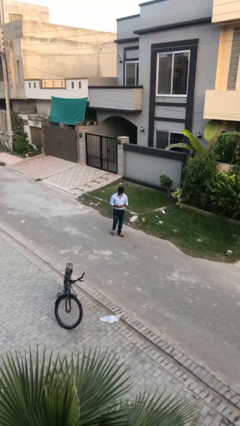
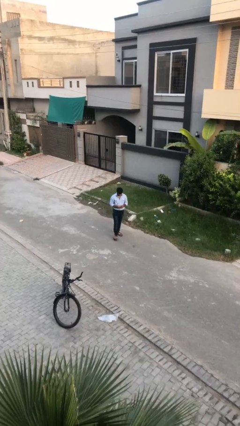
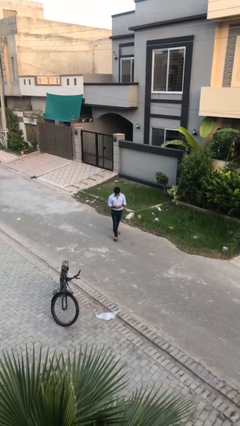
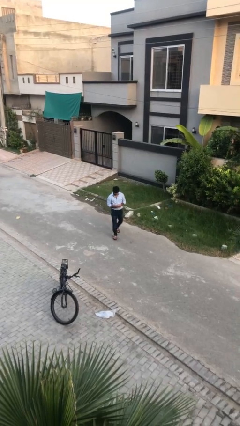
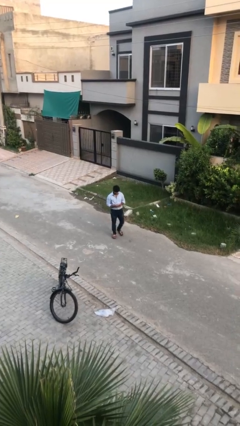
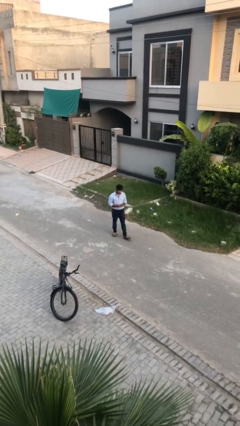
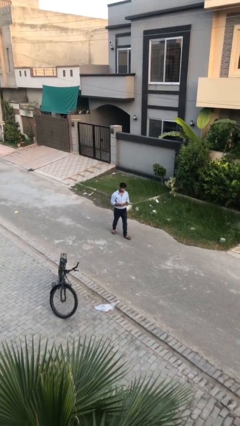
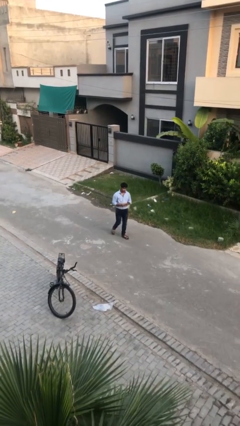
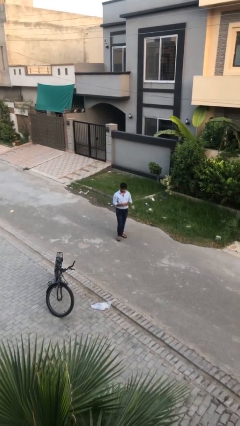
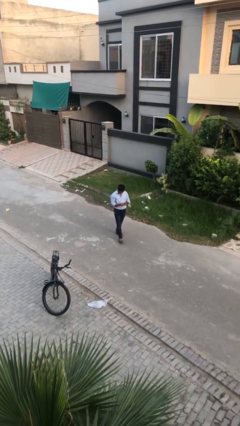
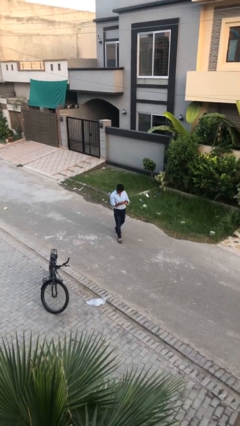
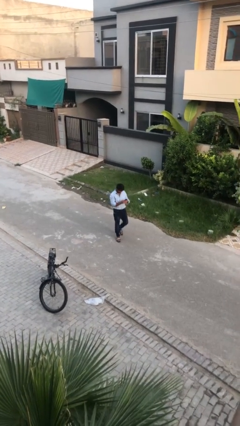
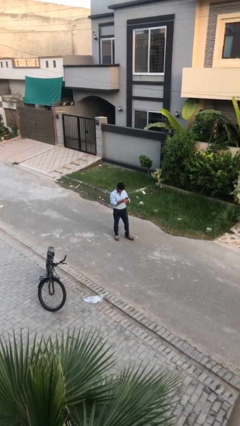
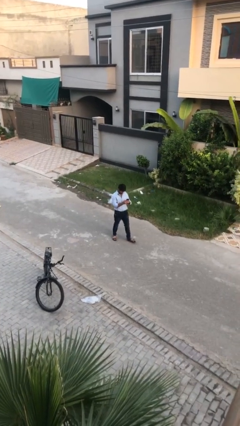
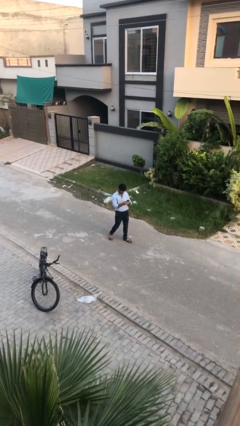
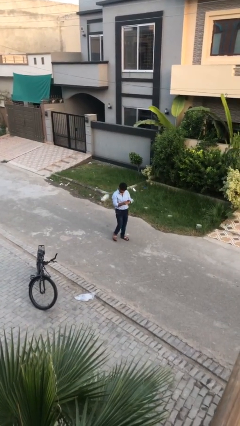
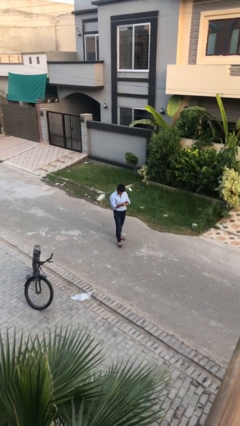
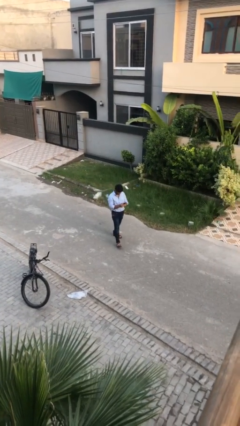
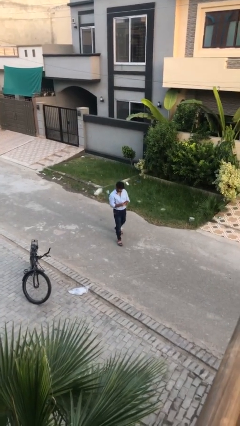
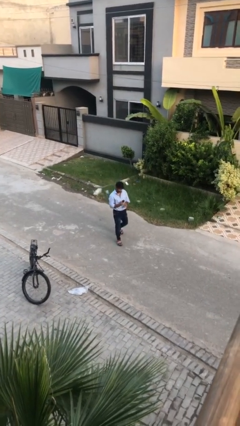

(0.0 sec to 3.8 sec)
person texts on phone

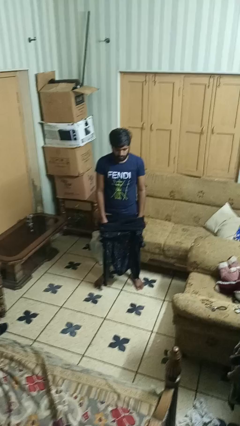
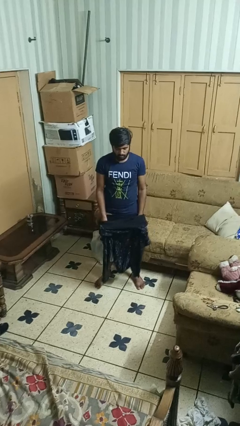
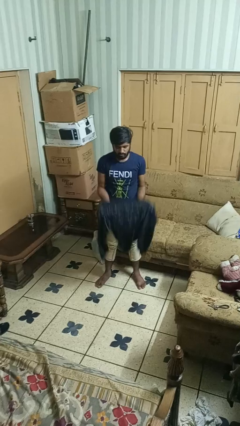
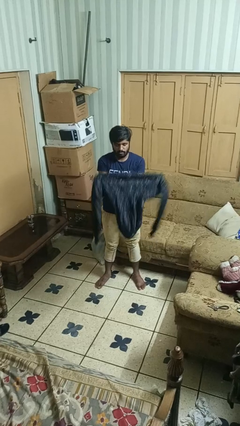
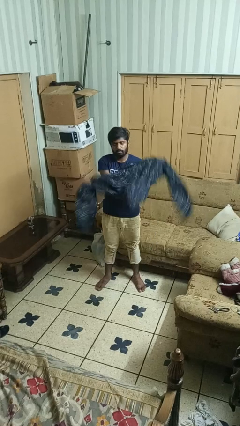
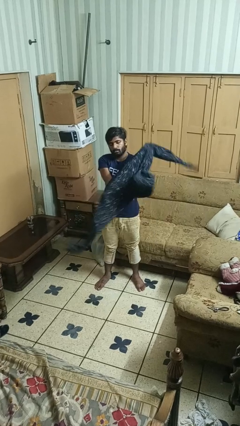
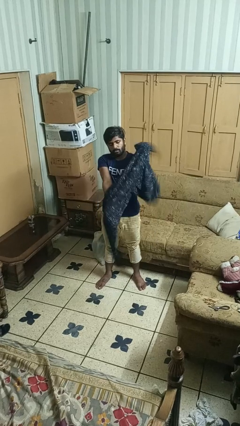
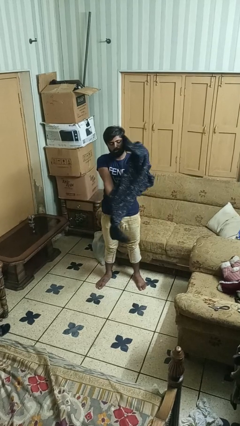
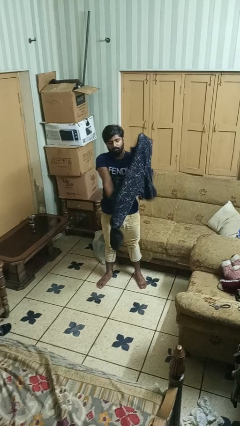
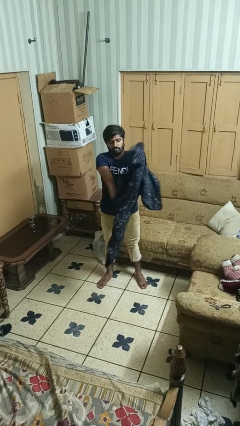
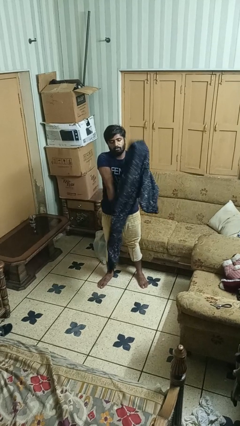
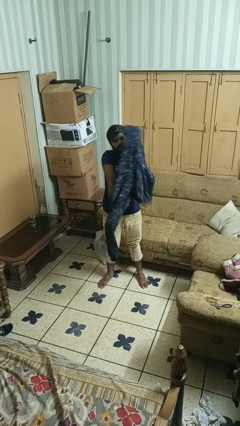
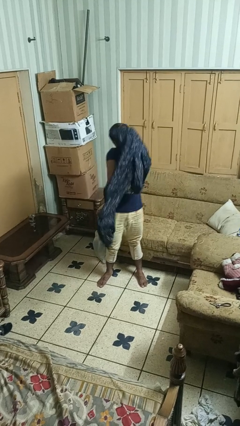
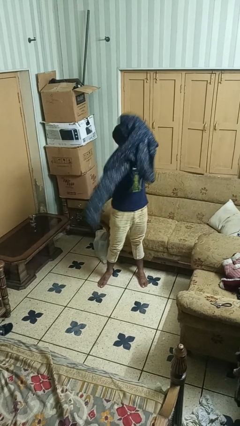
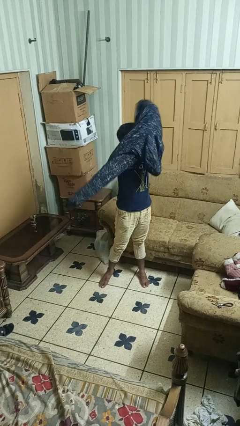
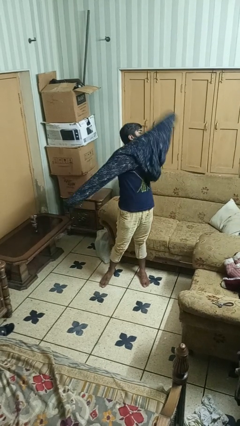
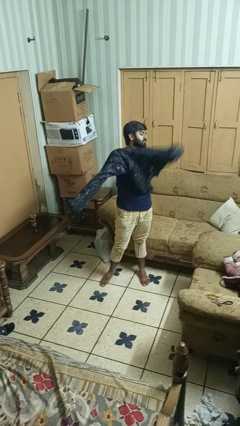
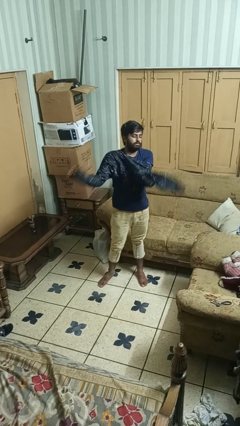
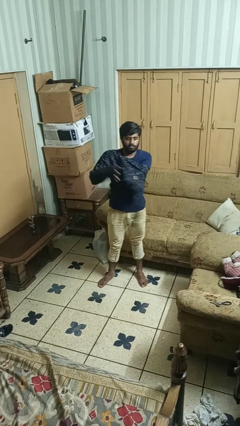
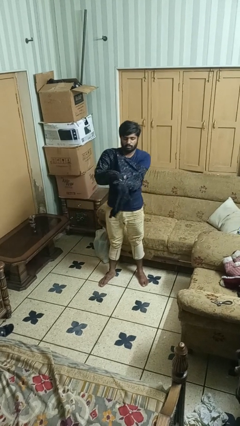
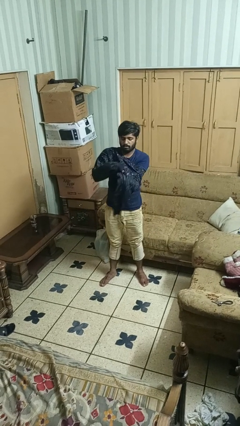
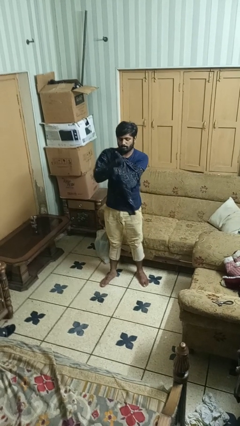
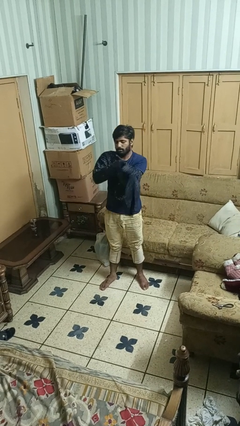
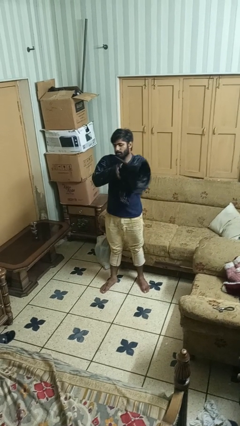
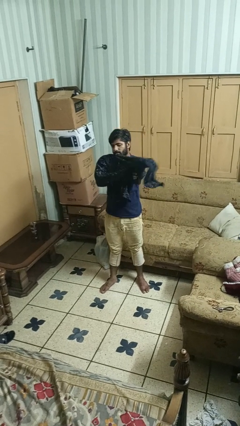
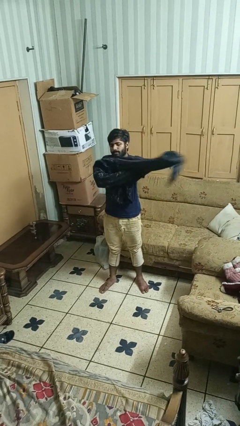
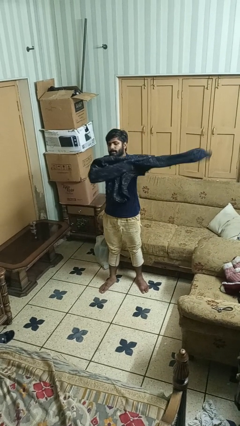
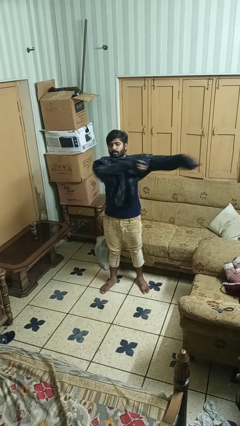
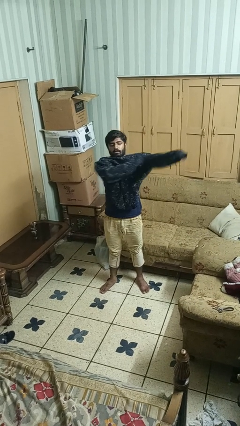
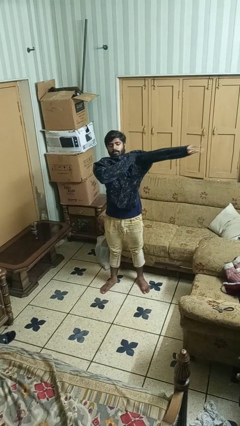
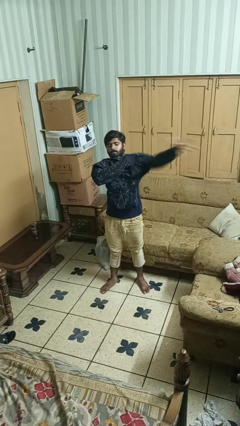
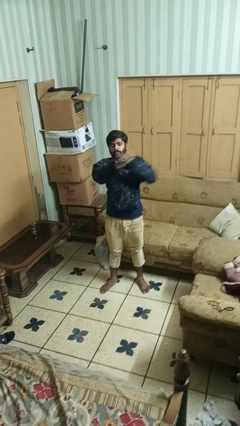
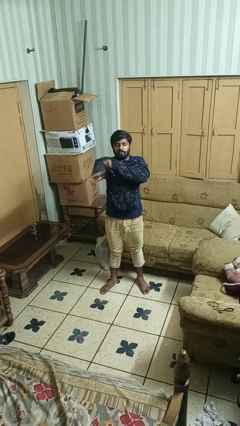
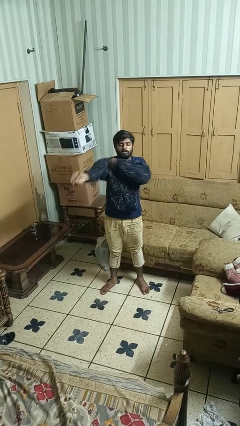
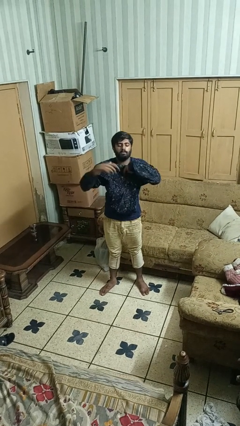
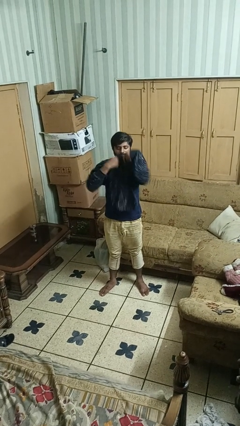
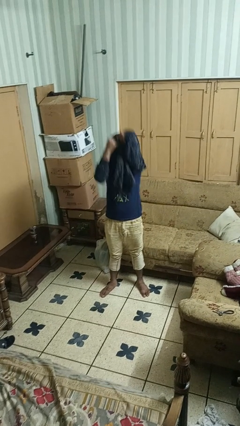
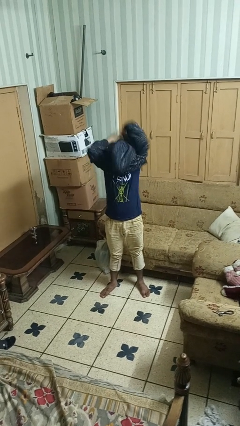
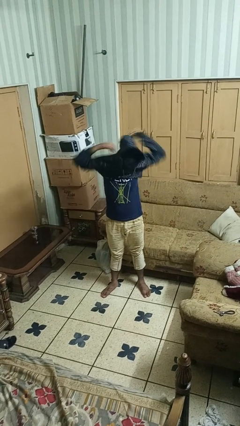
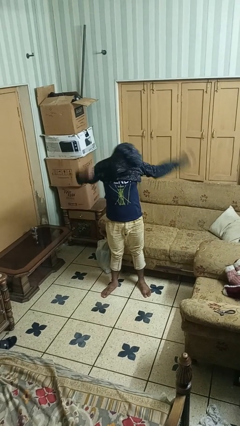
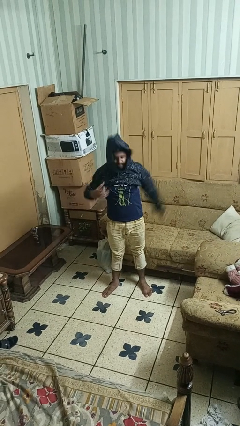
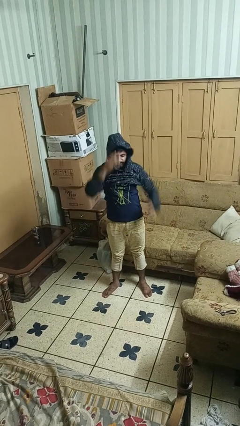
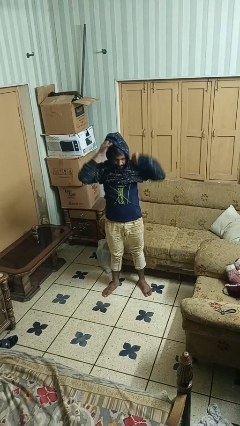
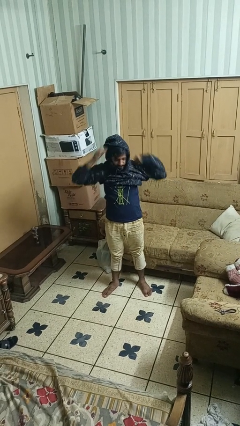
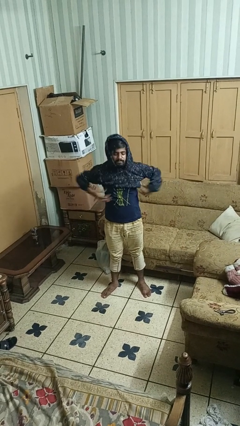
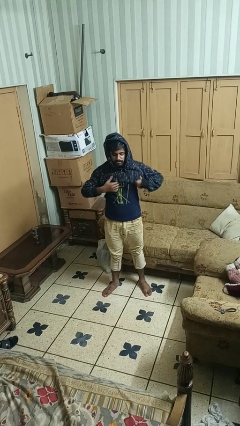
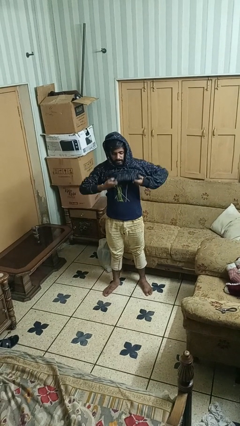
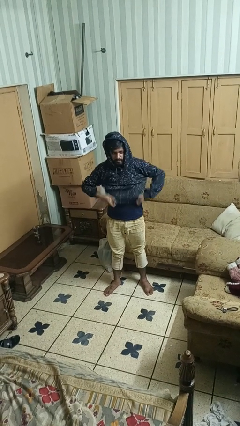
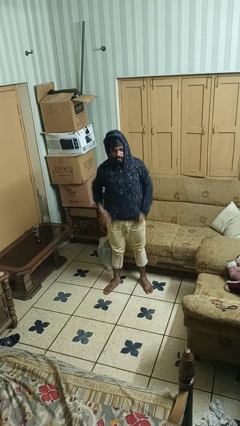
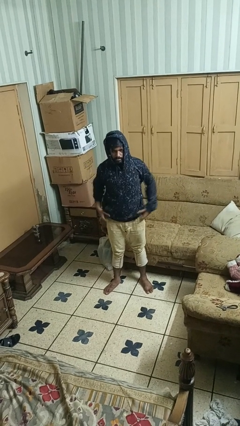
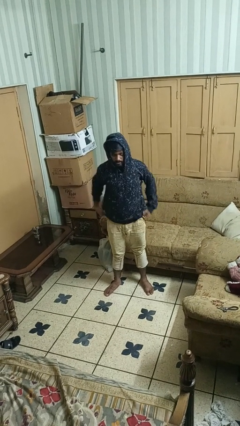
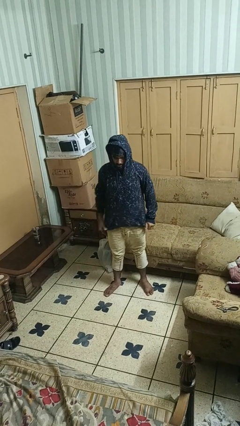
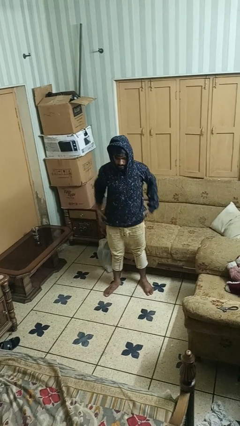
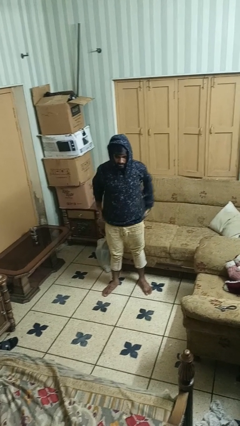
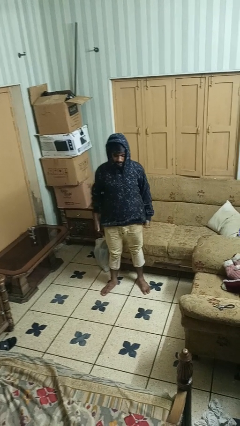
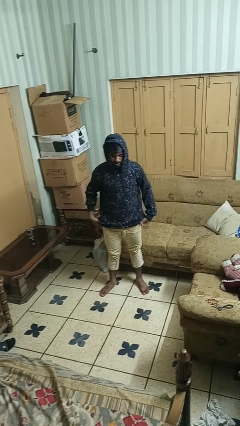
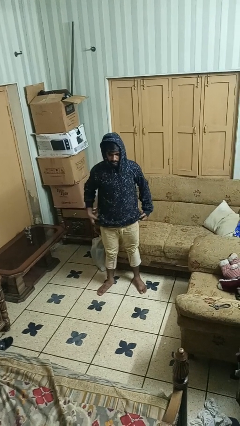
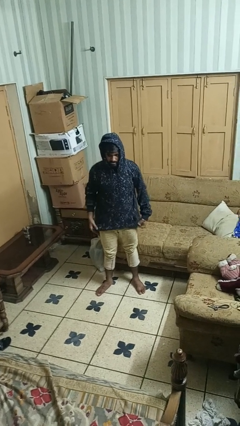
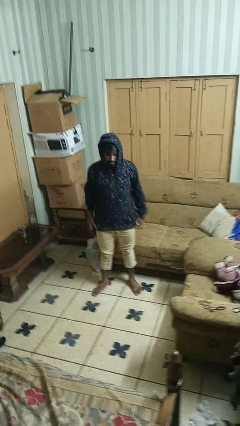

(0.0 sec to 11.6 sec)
person puts on hoodie

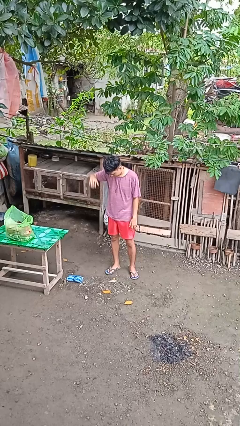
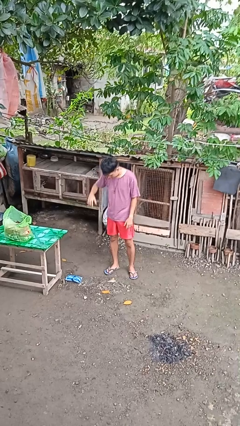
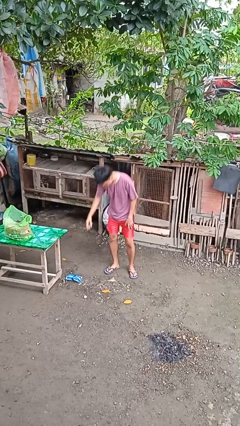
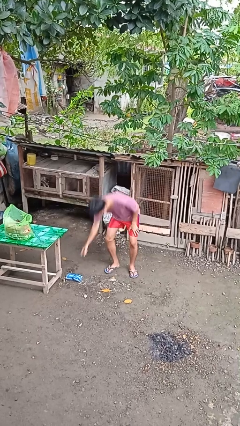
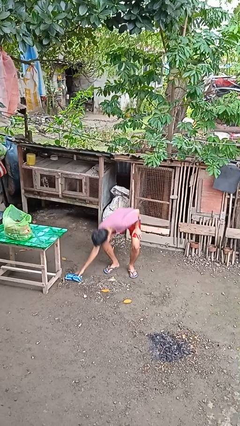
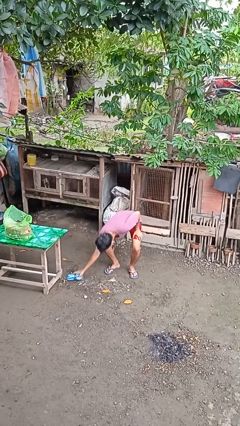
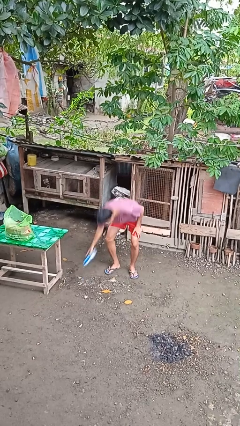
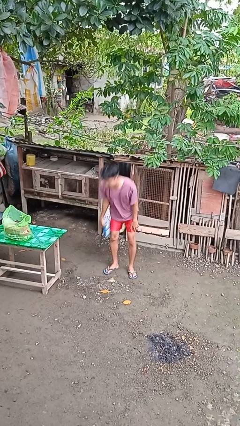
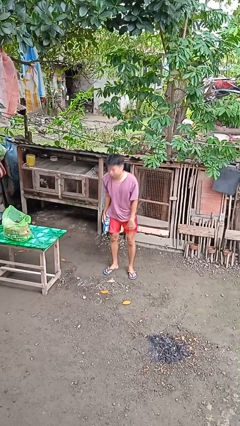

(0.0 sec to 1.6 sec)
person picks up object from floor

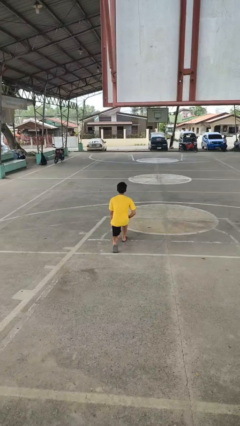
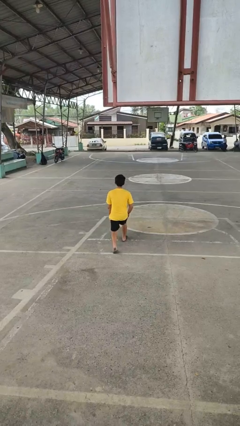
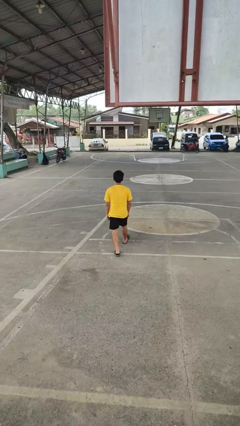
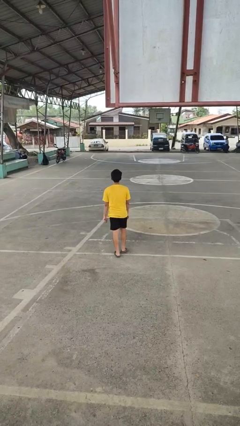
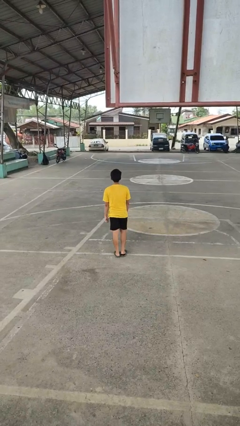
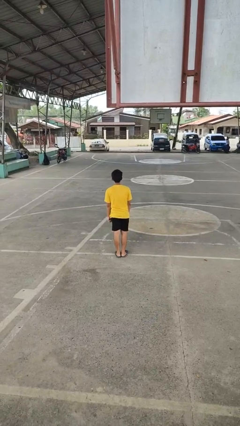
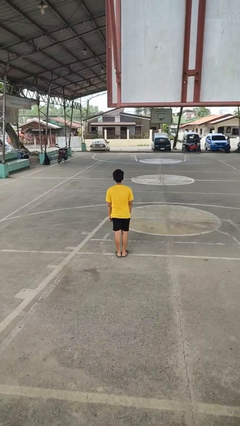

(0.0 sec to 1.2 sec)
person stands up from floor
